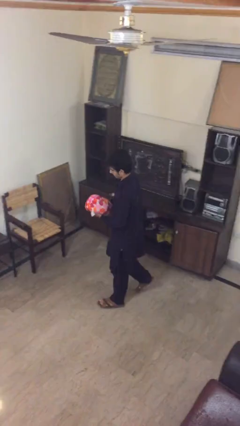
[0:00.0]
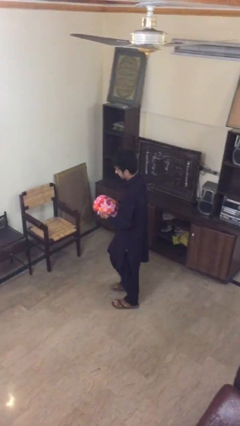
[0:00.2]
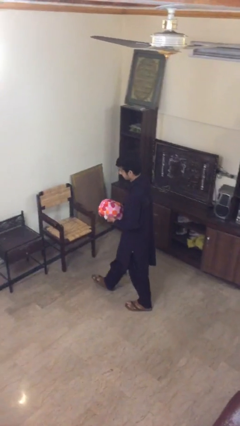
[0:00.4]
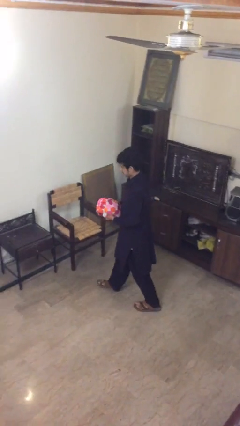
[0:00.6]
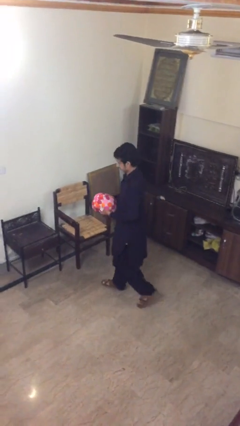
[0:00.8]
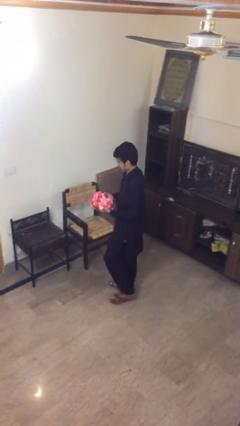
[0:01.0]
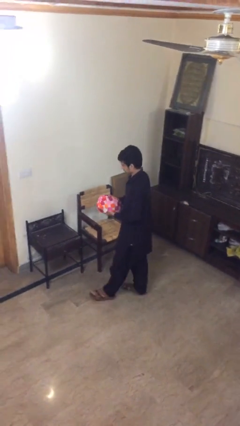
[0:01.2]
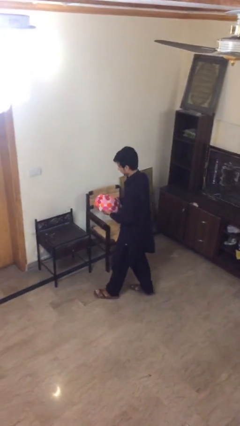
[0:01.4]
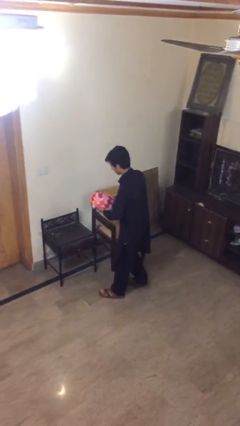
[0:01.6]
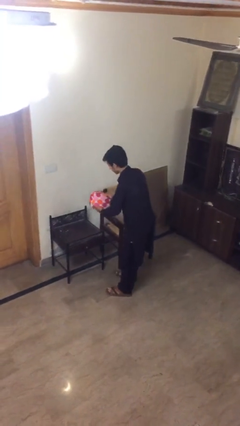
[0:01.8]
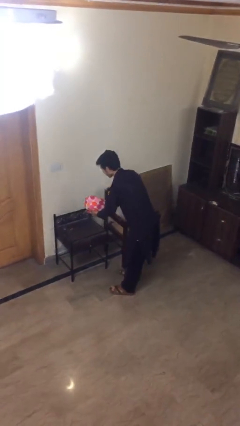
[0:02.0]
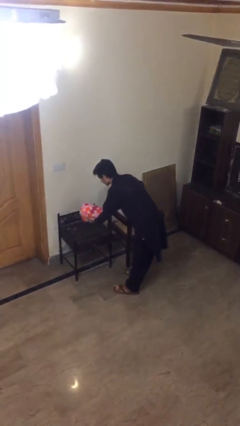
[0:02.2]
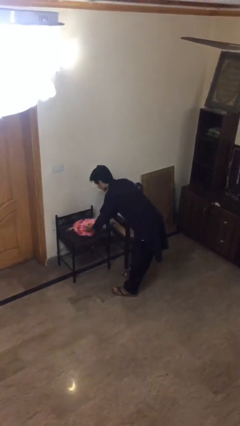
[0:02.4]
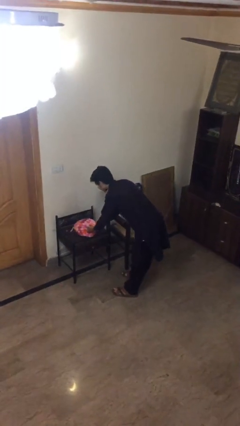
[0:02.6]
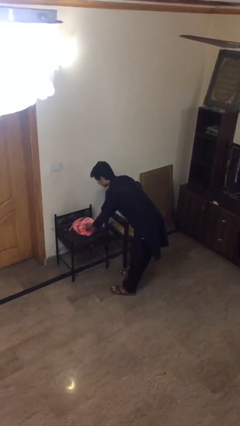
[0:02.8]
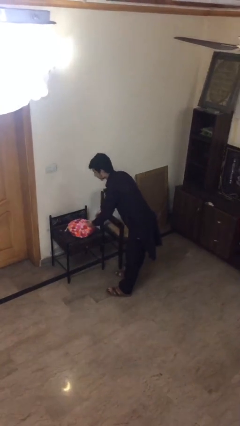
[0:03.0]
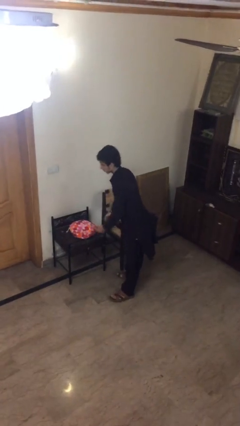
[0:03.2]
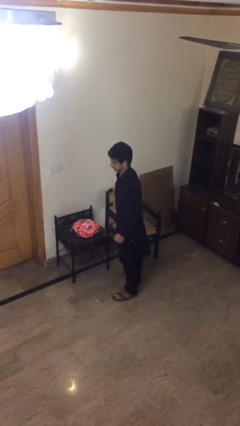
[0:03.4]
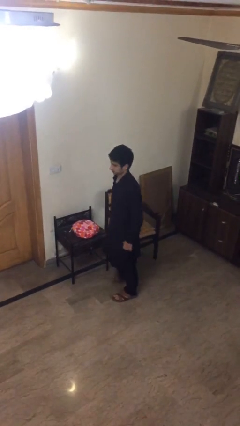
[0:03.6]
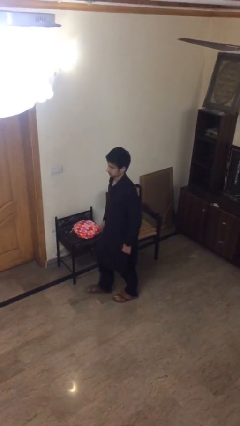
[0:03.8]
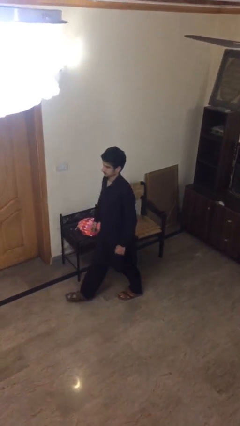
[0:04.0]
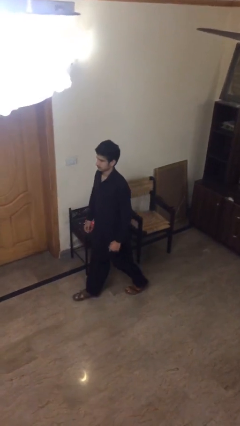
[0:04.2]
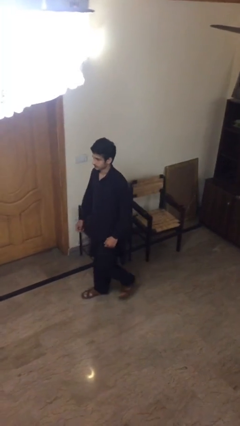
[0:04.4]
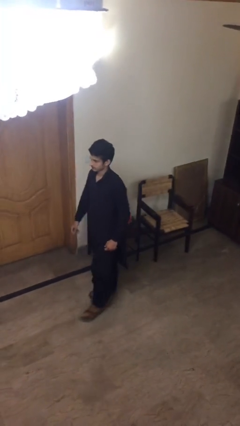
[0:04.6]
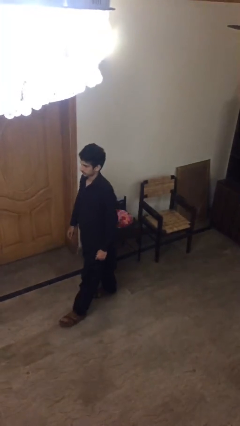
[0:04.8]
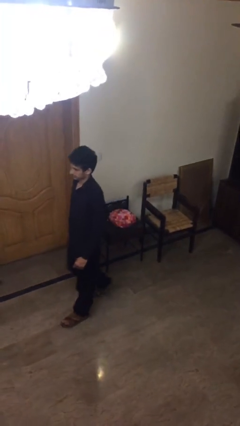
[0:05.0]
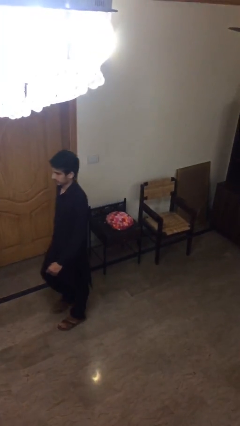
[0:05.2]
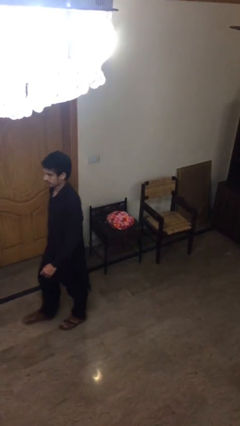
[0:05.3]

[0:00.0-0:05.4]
person puts down object on table

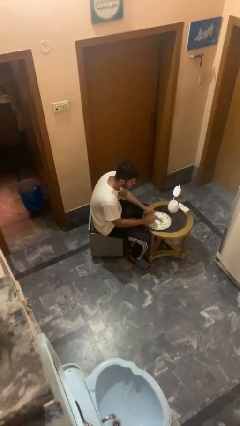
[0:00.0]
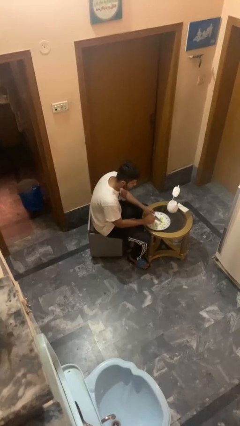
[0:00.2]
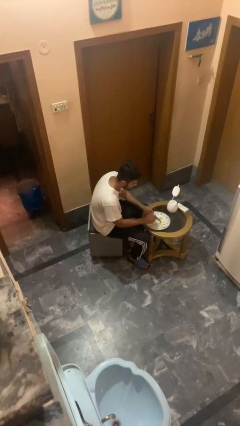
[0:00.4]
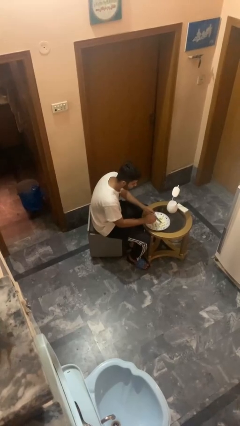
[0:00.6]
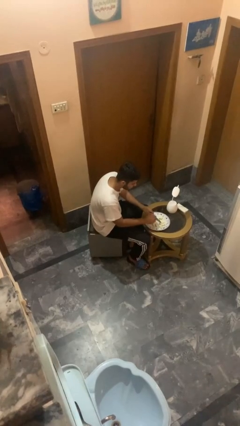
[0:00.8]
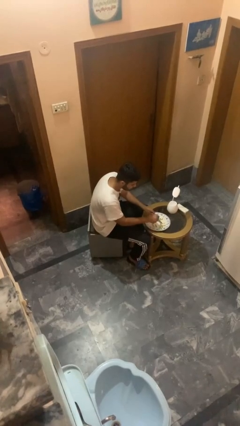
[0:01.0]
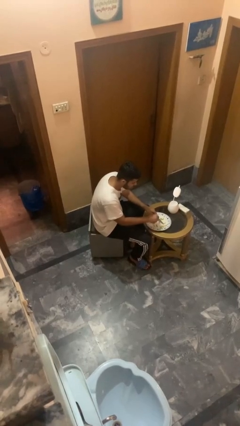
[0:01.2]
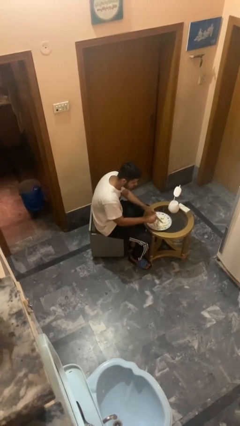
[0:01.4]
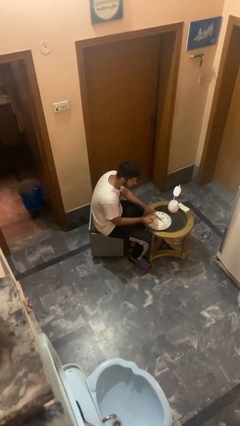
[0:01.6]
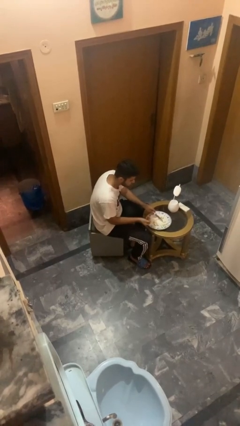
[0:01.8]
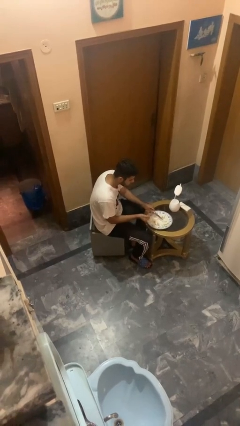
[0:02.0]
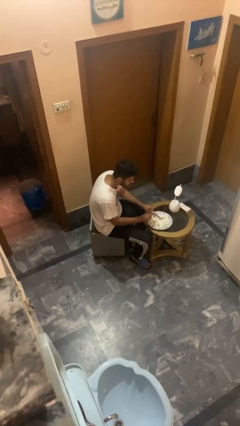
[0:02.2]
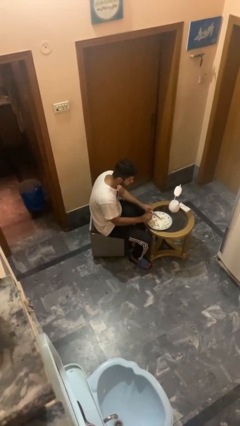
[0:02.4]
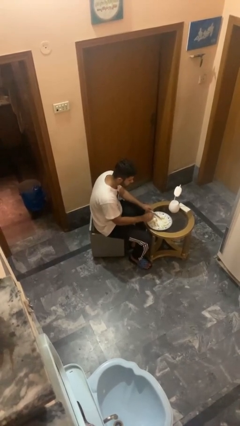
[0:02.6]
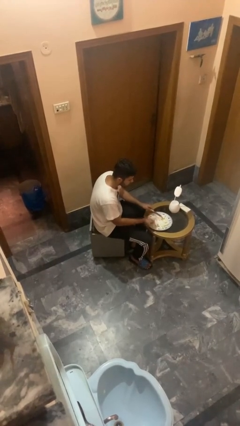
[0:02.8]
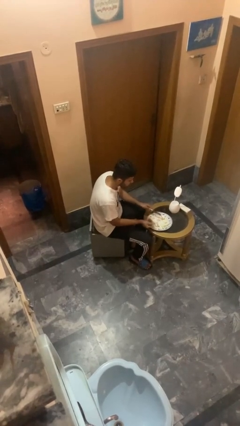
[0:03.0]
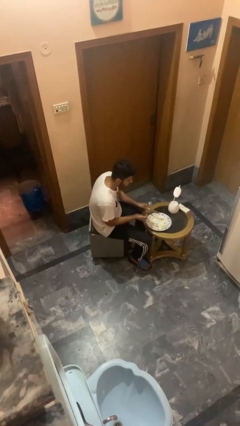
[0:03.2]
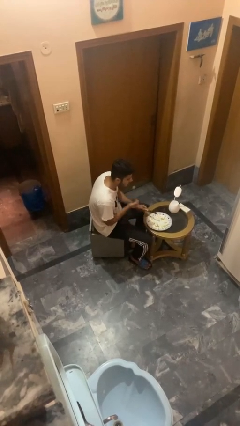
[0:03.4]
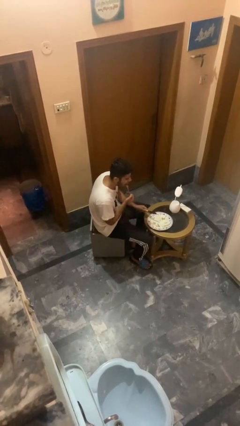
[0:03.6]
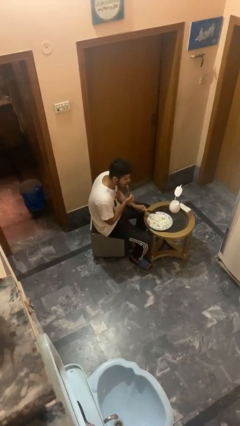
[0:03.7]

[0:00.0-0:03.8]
person eats with utensil

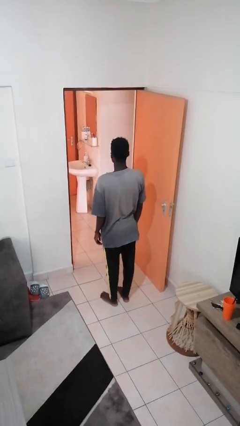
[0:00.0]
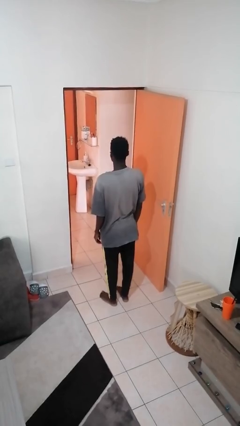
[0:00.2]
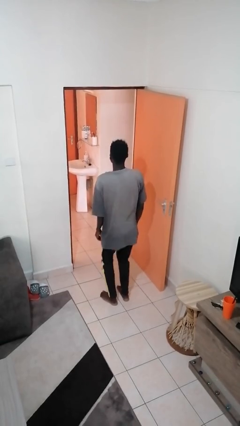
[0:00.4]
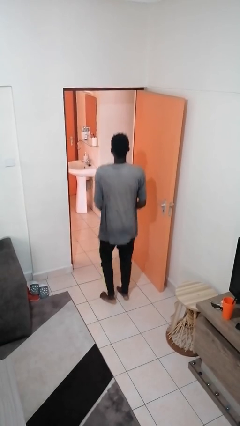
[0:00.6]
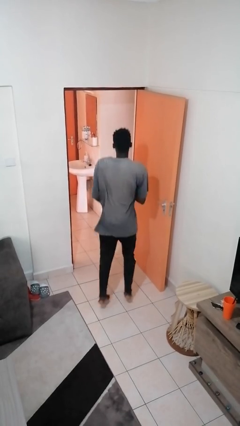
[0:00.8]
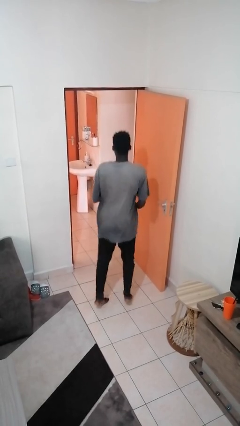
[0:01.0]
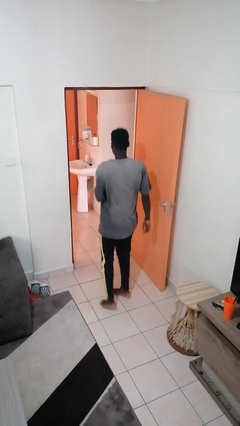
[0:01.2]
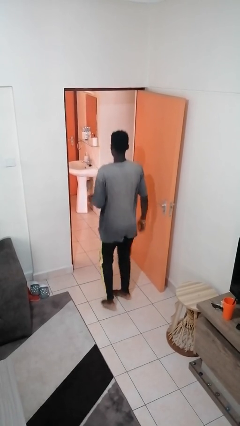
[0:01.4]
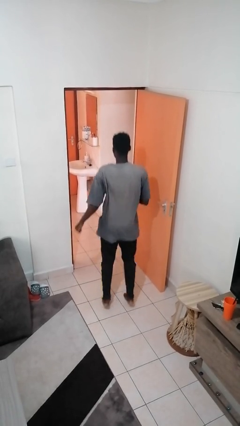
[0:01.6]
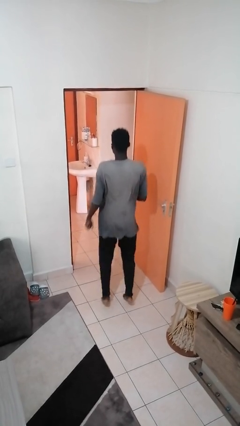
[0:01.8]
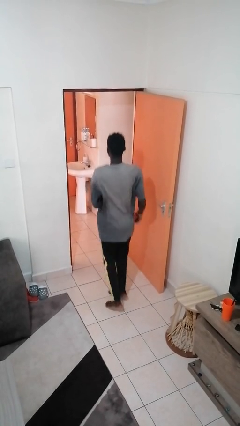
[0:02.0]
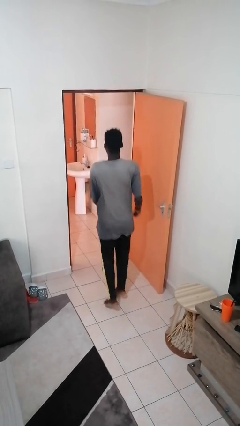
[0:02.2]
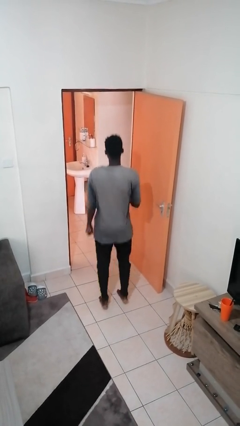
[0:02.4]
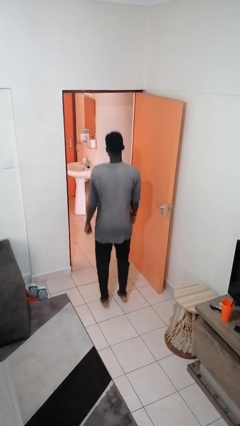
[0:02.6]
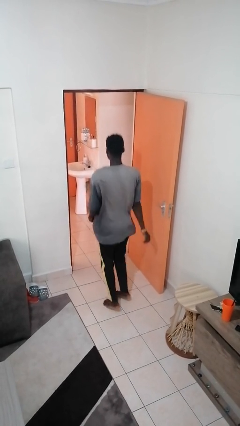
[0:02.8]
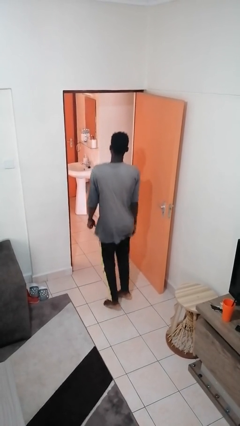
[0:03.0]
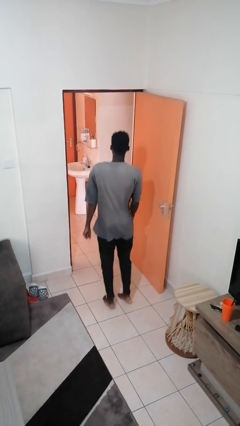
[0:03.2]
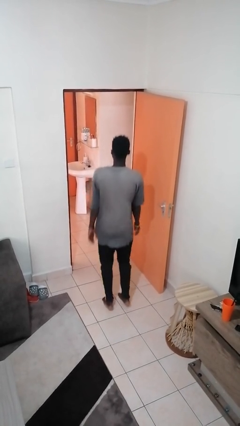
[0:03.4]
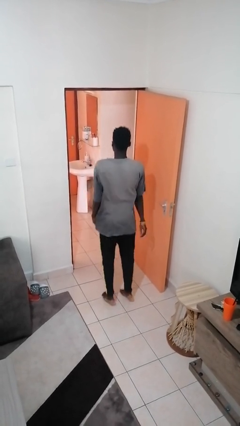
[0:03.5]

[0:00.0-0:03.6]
person jumps

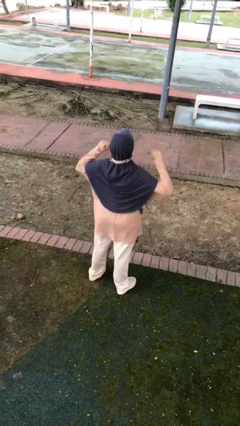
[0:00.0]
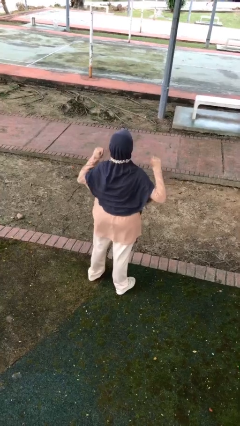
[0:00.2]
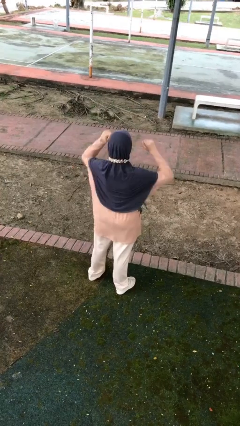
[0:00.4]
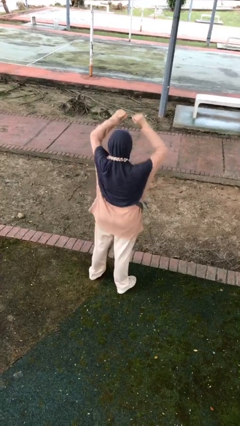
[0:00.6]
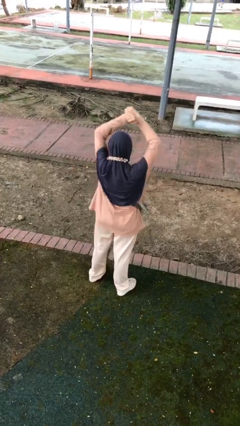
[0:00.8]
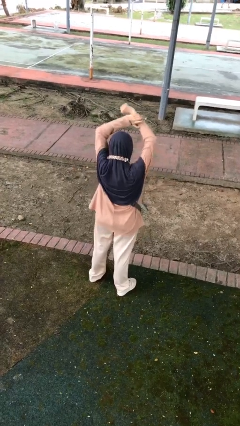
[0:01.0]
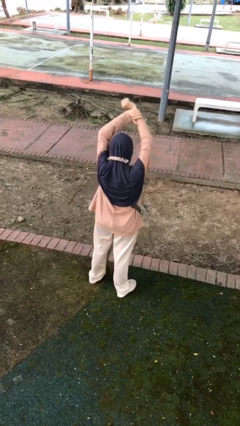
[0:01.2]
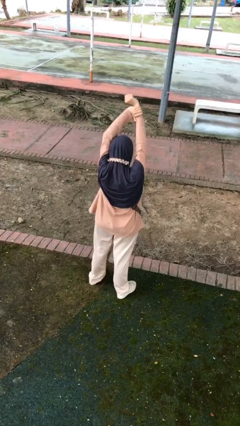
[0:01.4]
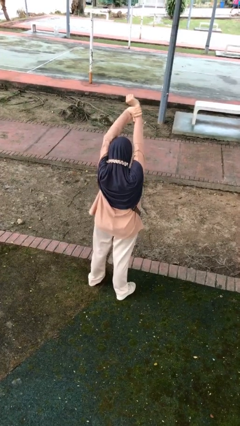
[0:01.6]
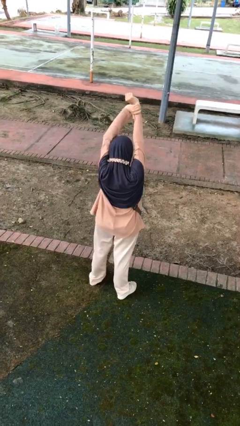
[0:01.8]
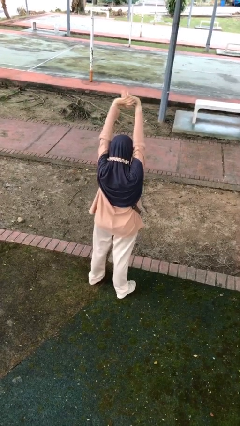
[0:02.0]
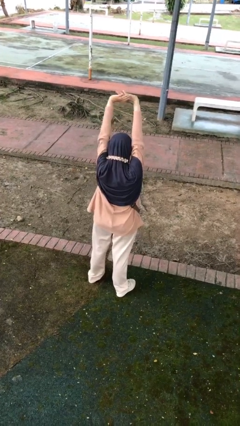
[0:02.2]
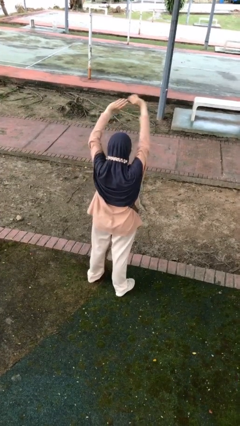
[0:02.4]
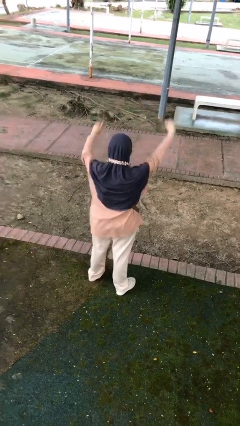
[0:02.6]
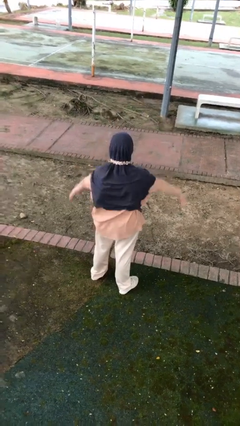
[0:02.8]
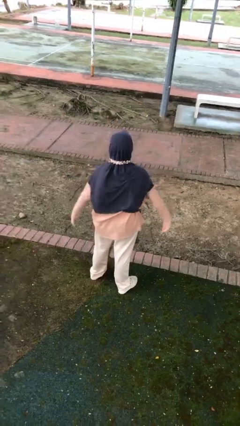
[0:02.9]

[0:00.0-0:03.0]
person stretches arms over head

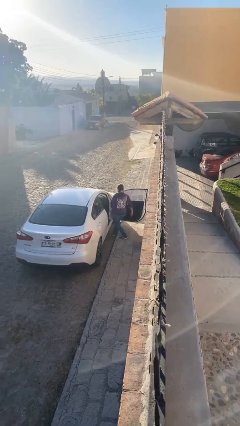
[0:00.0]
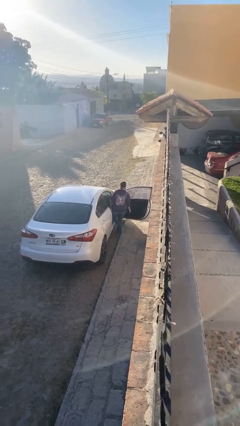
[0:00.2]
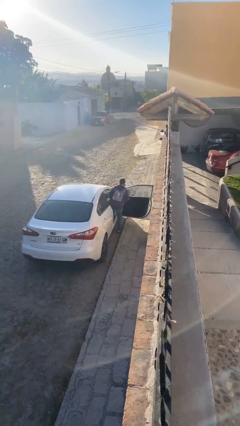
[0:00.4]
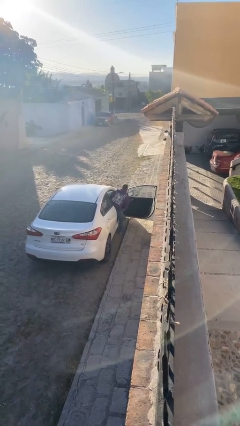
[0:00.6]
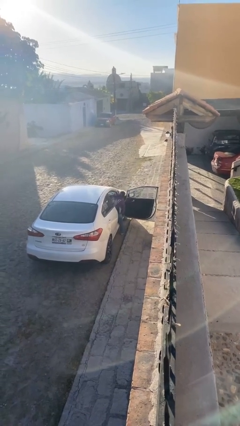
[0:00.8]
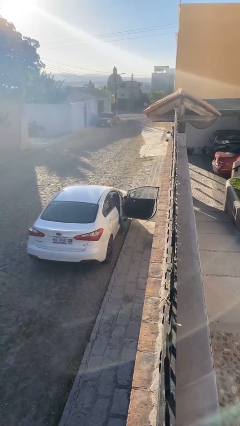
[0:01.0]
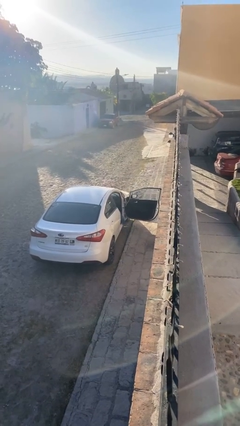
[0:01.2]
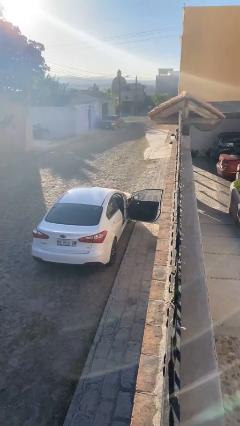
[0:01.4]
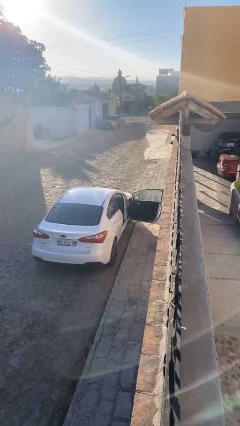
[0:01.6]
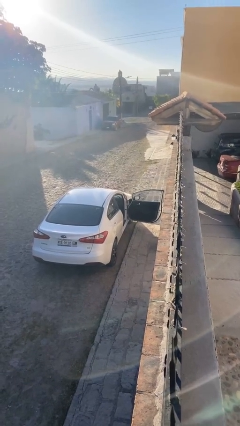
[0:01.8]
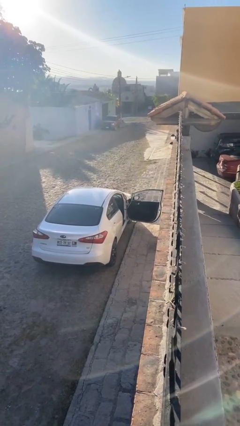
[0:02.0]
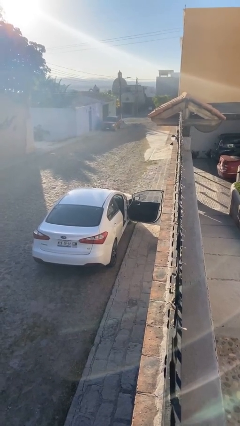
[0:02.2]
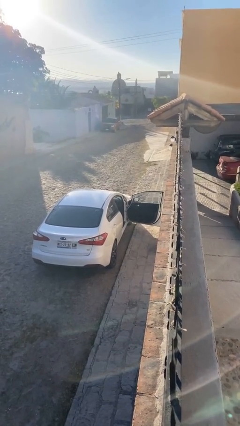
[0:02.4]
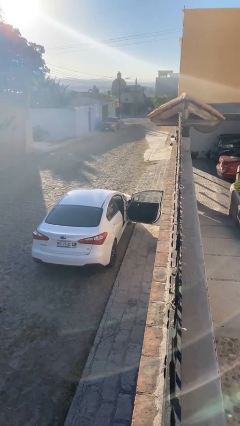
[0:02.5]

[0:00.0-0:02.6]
person enters car
